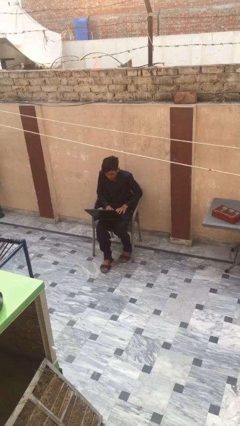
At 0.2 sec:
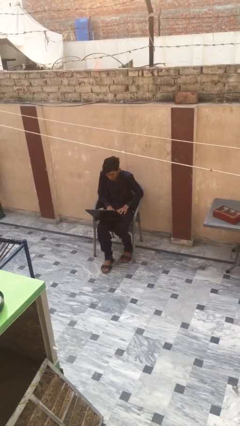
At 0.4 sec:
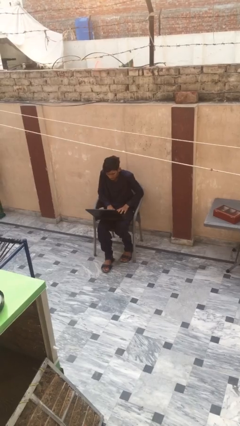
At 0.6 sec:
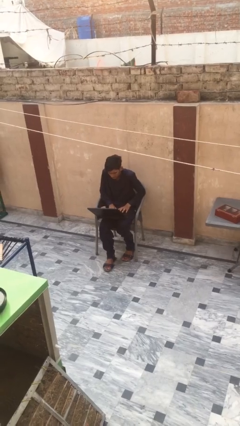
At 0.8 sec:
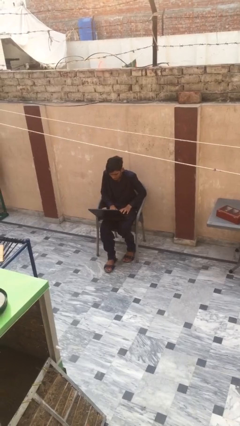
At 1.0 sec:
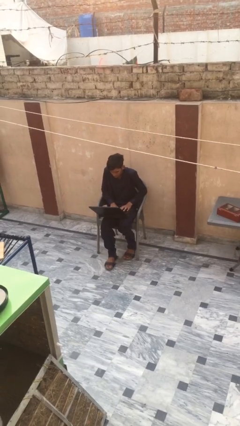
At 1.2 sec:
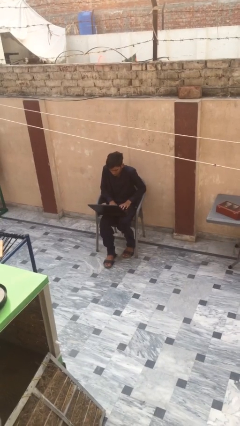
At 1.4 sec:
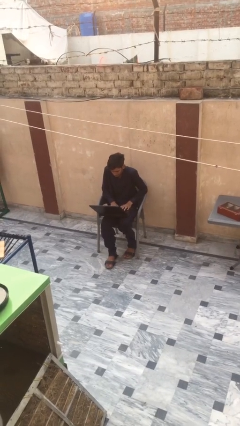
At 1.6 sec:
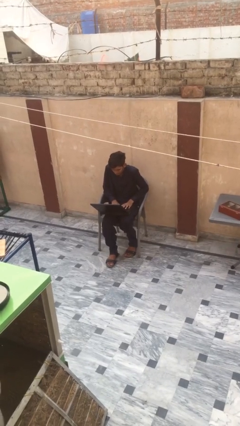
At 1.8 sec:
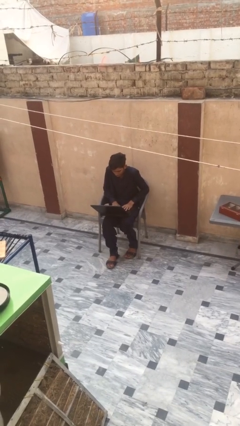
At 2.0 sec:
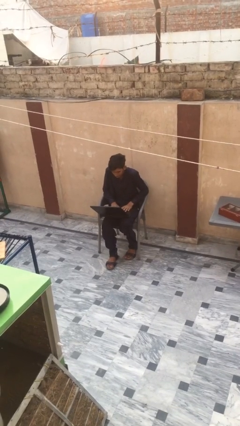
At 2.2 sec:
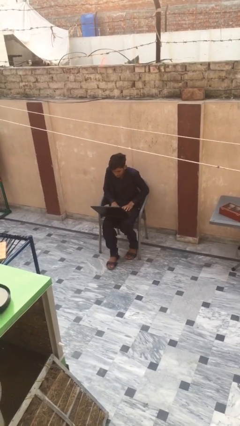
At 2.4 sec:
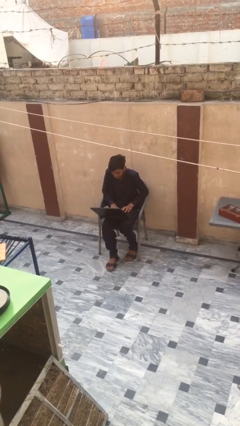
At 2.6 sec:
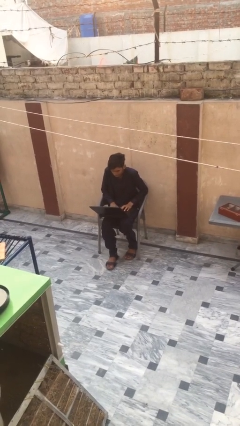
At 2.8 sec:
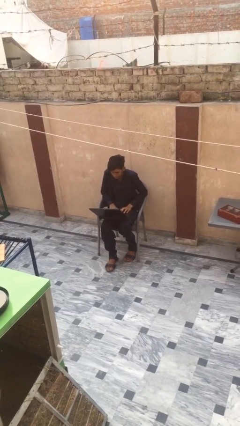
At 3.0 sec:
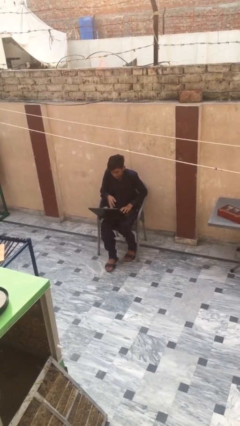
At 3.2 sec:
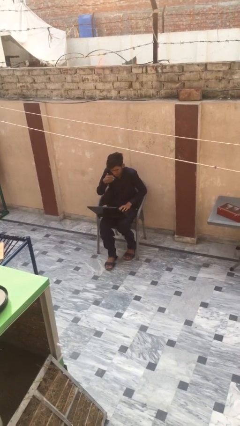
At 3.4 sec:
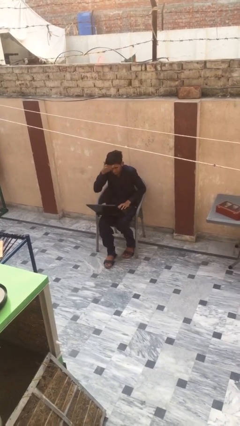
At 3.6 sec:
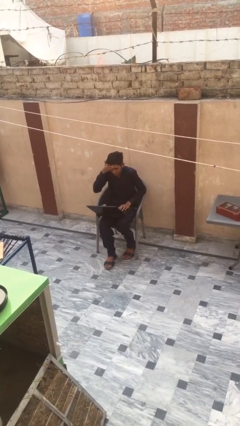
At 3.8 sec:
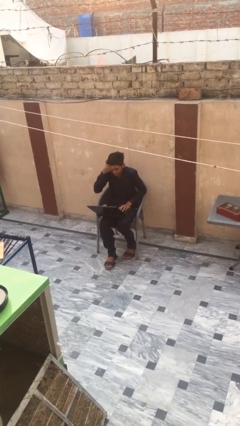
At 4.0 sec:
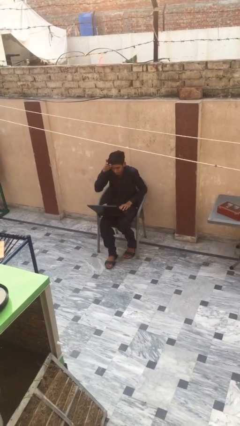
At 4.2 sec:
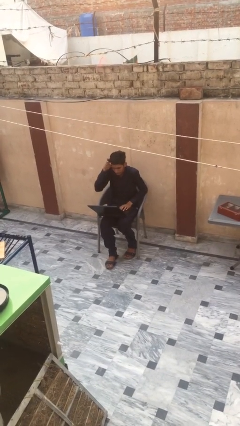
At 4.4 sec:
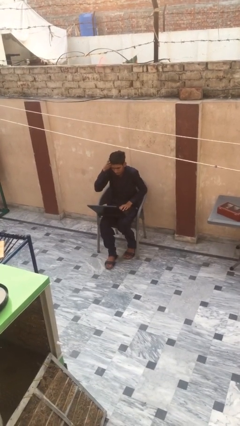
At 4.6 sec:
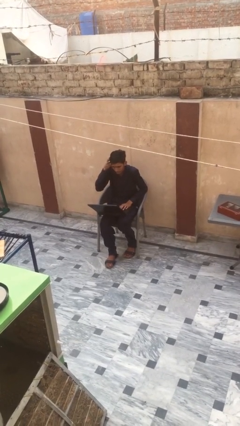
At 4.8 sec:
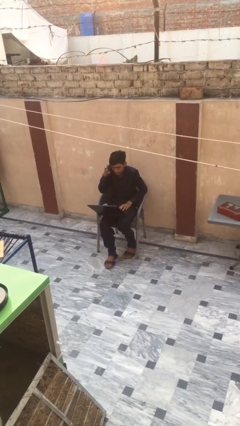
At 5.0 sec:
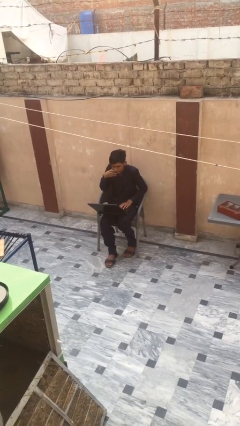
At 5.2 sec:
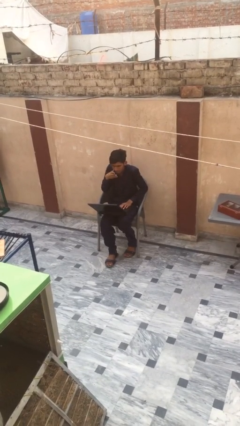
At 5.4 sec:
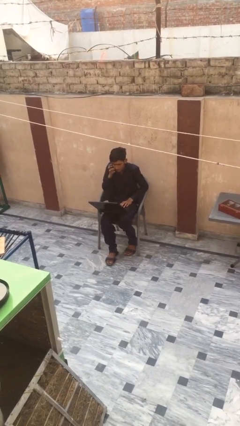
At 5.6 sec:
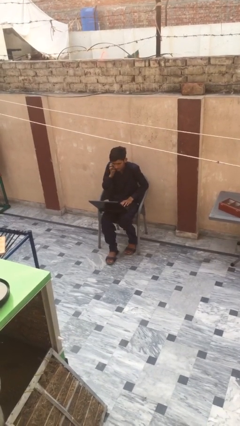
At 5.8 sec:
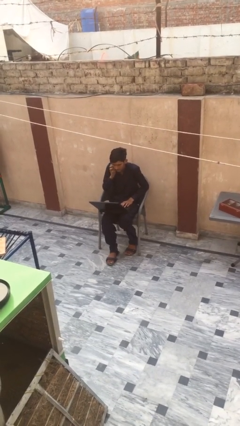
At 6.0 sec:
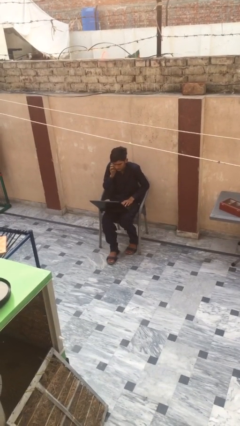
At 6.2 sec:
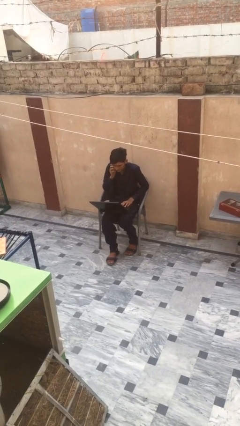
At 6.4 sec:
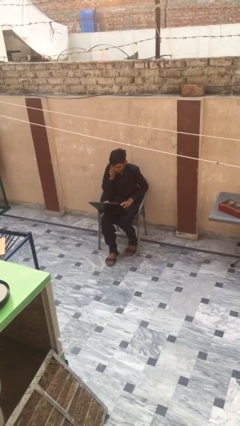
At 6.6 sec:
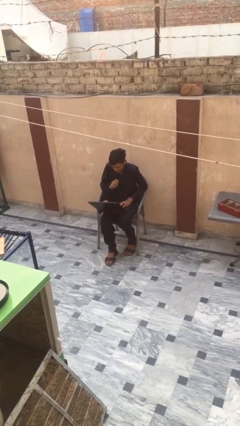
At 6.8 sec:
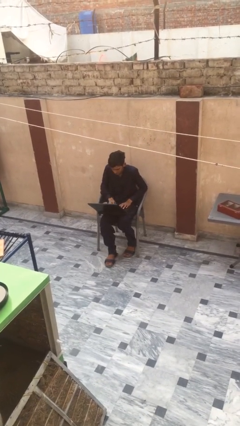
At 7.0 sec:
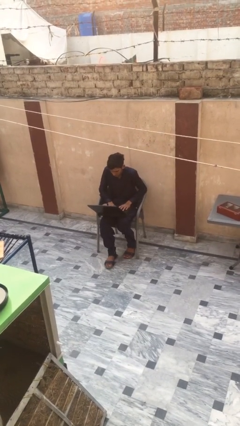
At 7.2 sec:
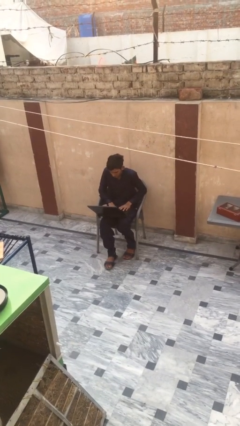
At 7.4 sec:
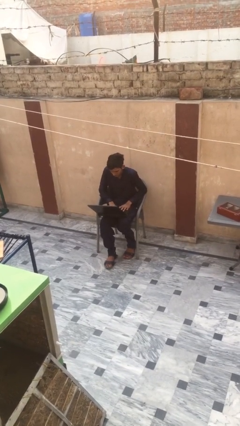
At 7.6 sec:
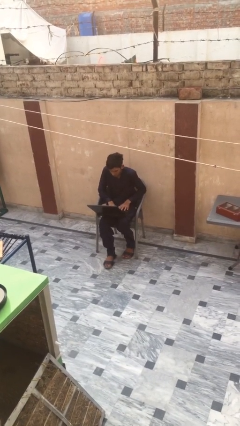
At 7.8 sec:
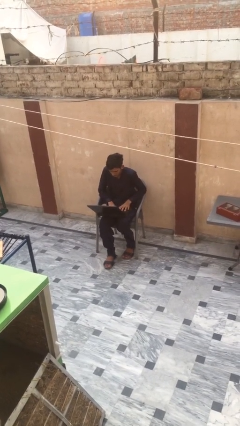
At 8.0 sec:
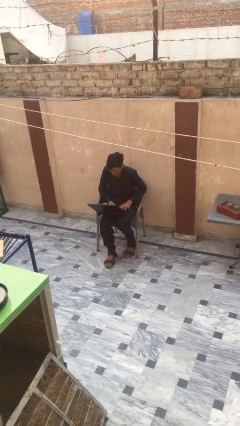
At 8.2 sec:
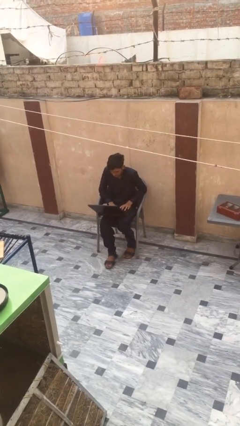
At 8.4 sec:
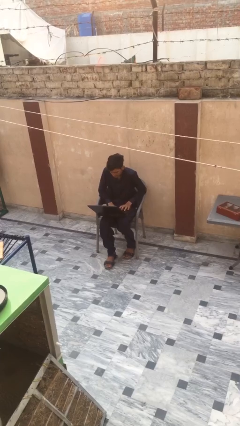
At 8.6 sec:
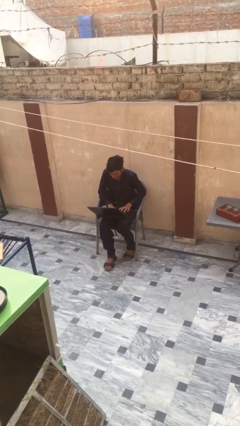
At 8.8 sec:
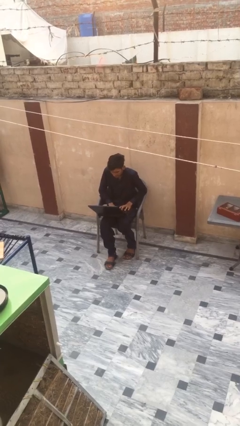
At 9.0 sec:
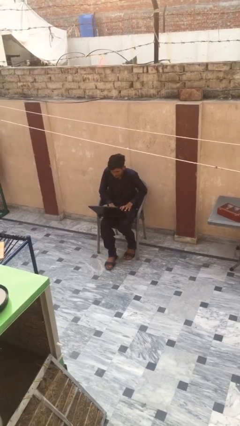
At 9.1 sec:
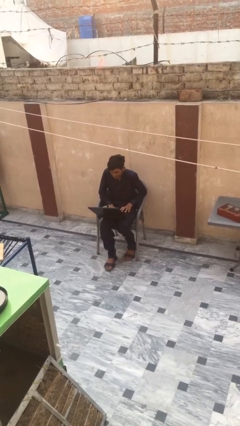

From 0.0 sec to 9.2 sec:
person interacts with laptop

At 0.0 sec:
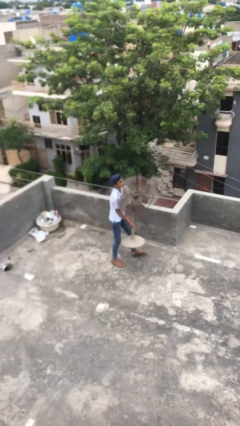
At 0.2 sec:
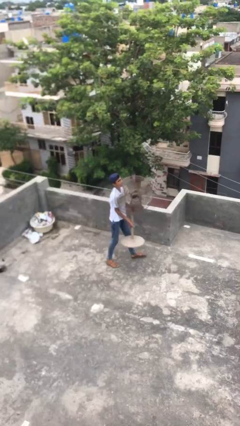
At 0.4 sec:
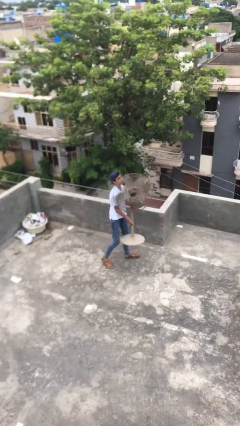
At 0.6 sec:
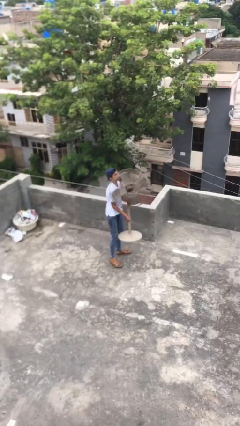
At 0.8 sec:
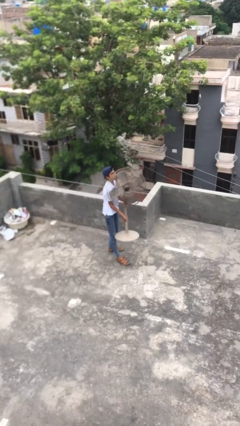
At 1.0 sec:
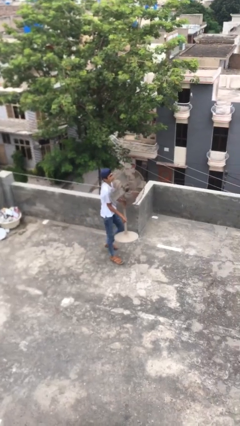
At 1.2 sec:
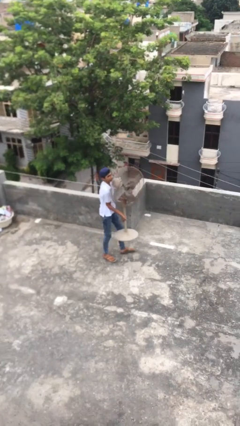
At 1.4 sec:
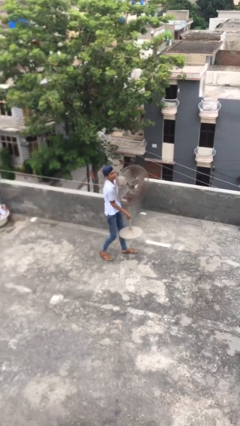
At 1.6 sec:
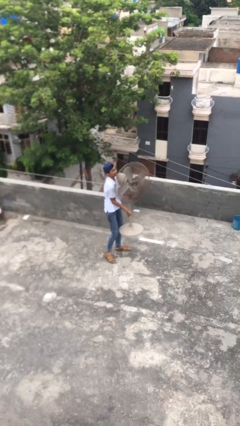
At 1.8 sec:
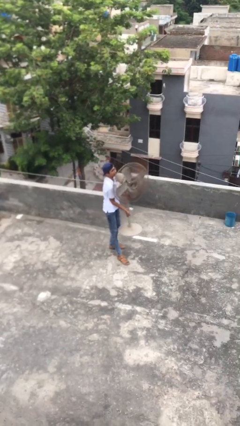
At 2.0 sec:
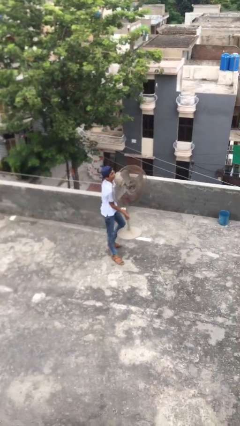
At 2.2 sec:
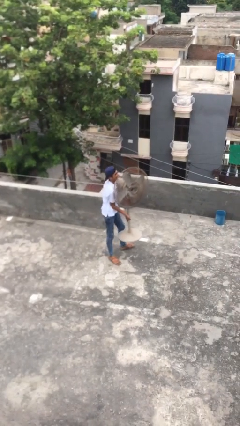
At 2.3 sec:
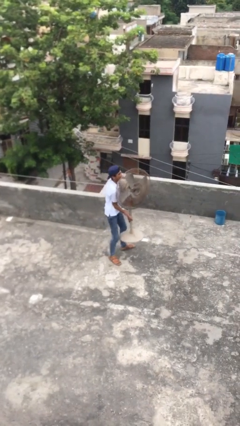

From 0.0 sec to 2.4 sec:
person carries heavy object

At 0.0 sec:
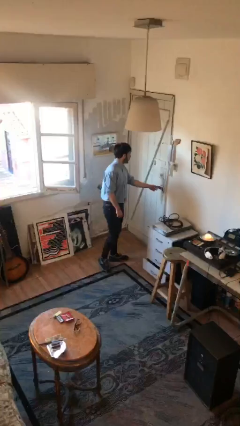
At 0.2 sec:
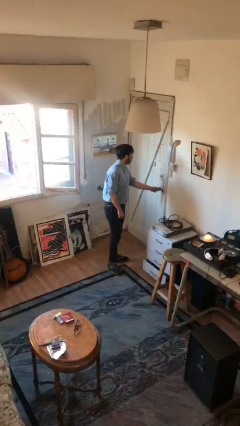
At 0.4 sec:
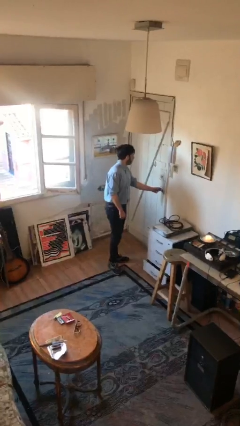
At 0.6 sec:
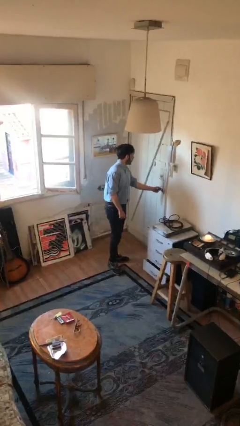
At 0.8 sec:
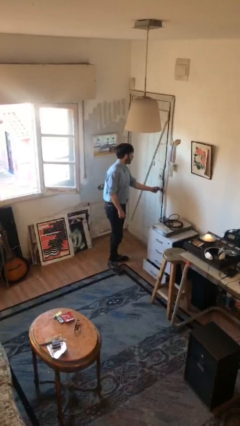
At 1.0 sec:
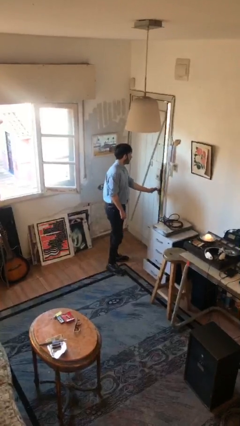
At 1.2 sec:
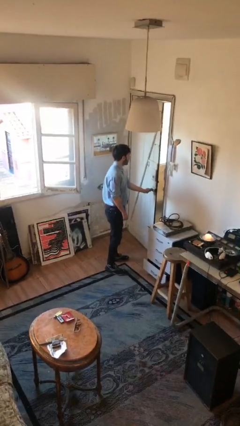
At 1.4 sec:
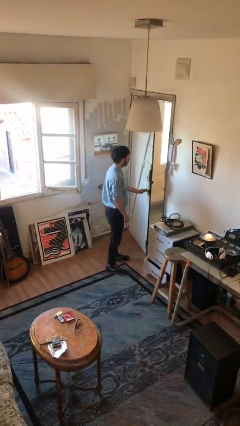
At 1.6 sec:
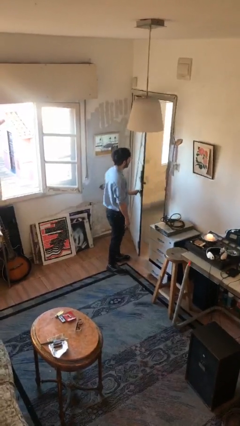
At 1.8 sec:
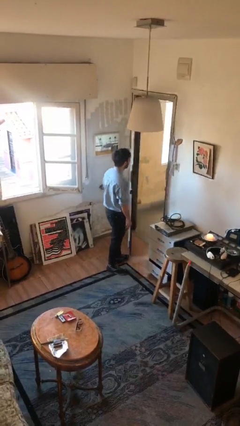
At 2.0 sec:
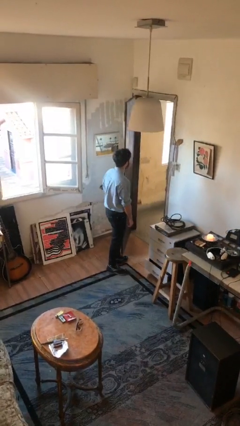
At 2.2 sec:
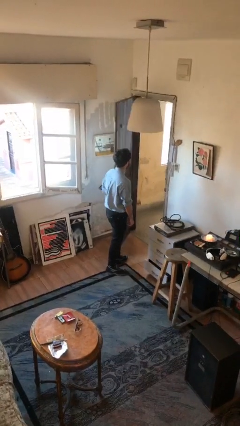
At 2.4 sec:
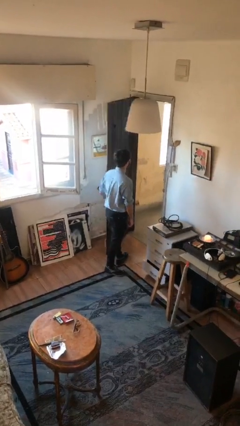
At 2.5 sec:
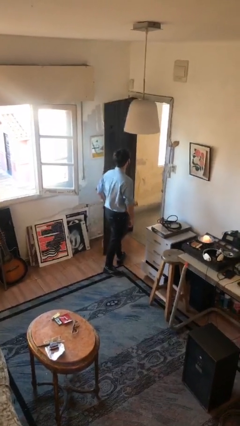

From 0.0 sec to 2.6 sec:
person opens facility door

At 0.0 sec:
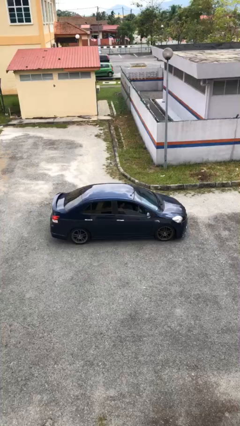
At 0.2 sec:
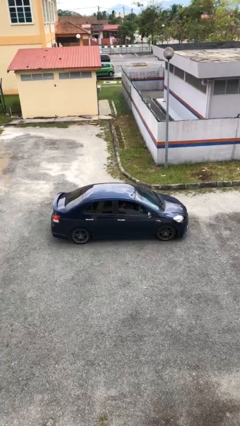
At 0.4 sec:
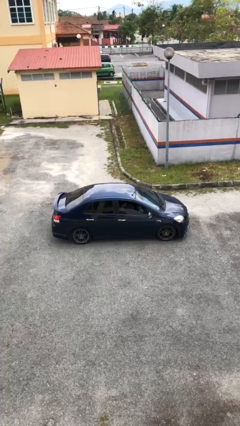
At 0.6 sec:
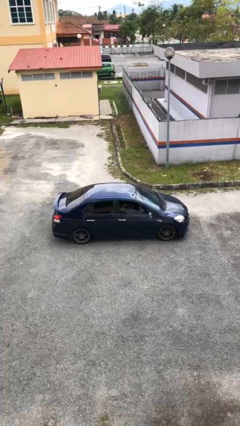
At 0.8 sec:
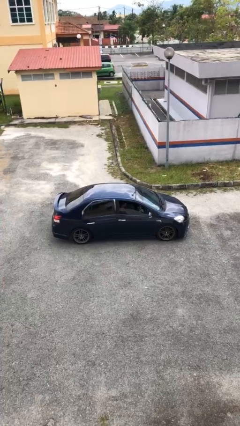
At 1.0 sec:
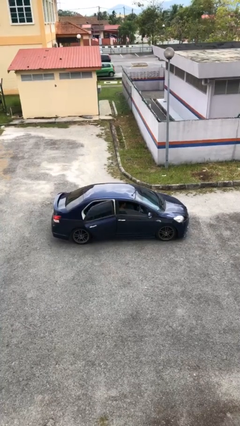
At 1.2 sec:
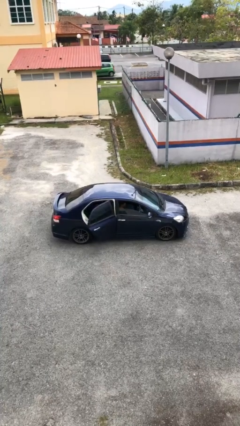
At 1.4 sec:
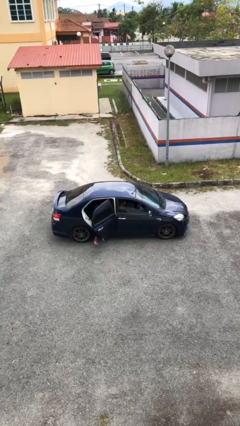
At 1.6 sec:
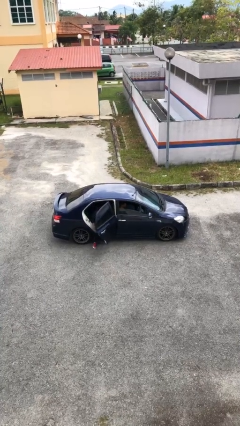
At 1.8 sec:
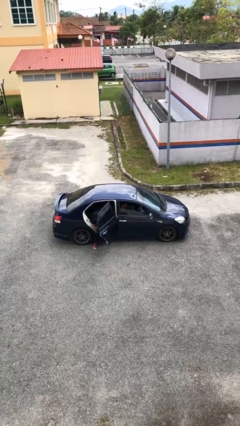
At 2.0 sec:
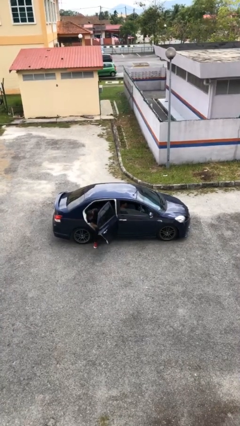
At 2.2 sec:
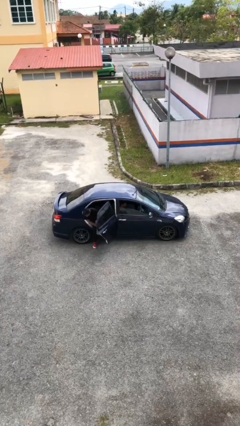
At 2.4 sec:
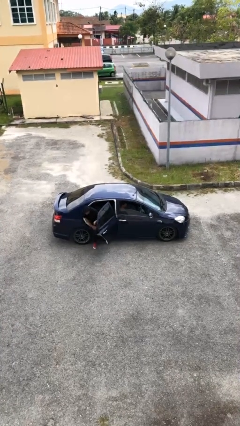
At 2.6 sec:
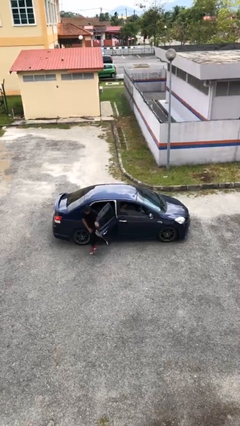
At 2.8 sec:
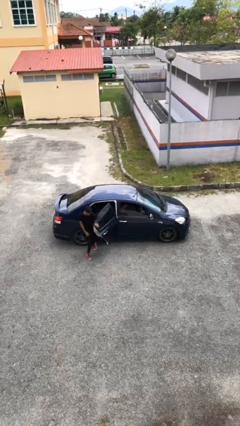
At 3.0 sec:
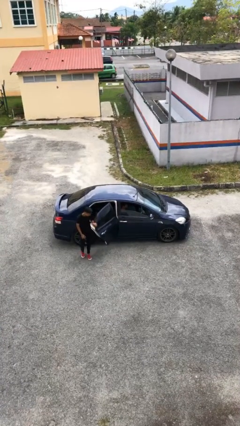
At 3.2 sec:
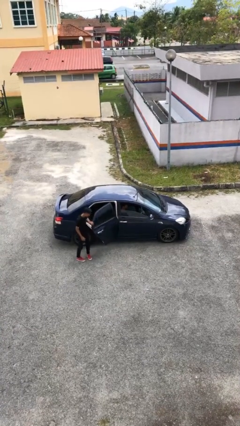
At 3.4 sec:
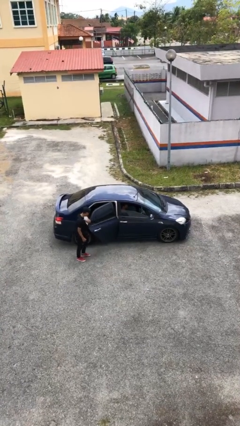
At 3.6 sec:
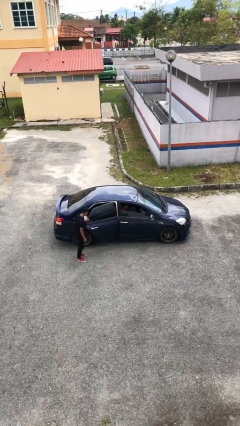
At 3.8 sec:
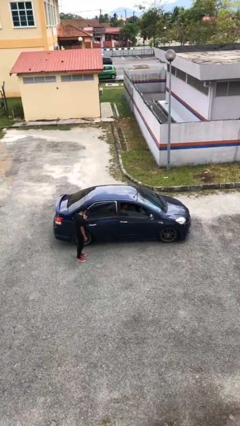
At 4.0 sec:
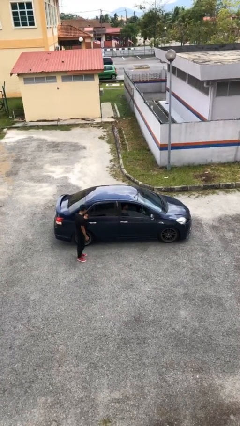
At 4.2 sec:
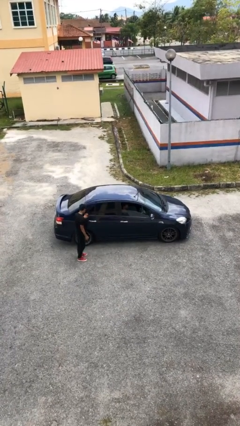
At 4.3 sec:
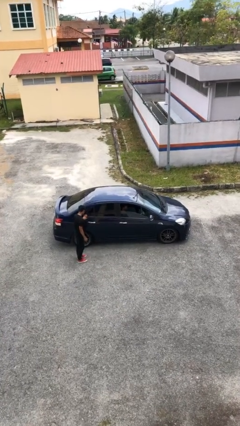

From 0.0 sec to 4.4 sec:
car drops off person
